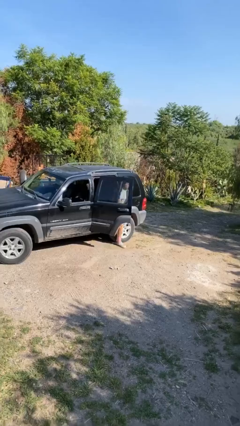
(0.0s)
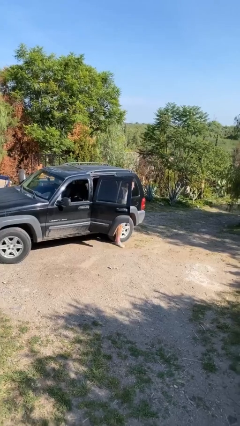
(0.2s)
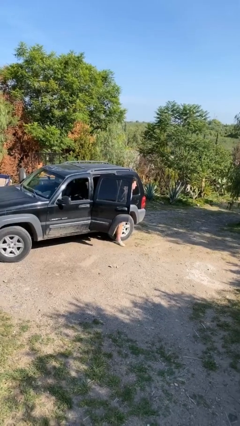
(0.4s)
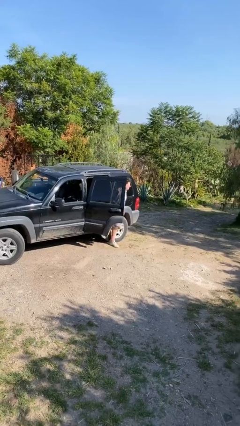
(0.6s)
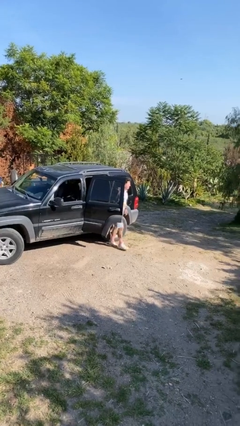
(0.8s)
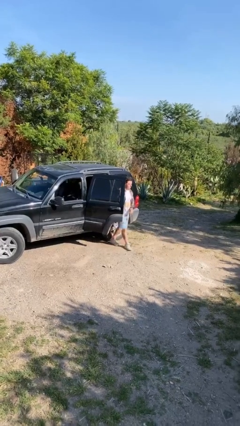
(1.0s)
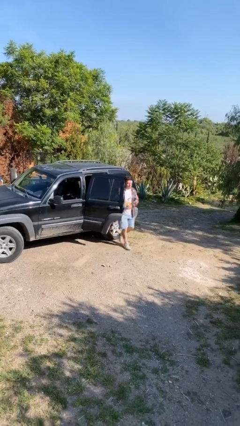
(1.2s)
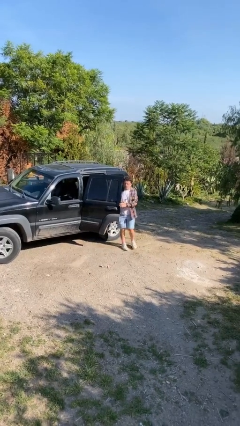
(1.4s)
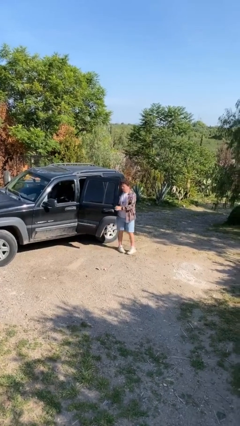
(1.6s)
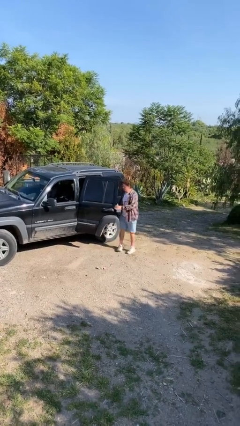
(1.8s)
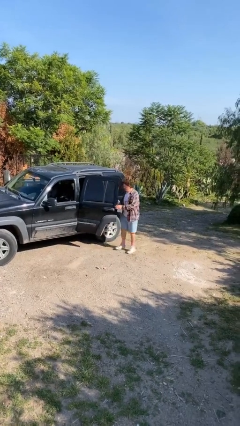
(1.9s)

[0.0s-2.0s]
person exits car

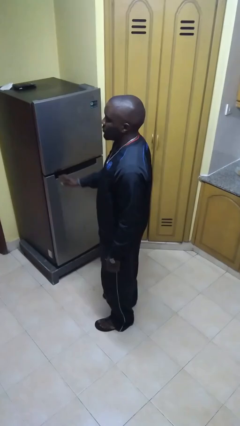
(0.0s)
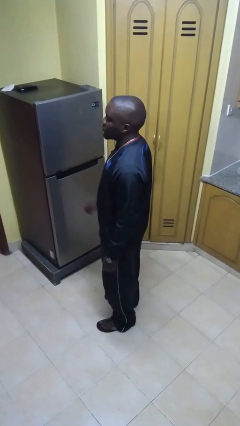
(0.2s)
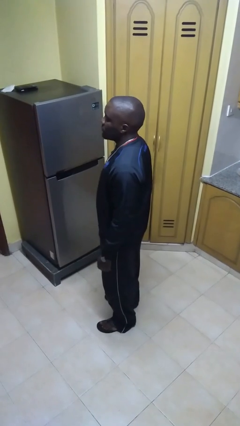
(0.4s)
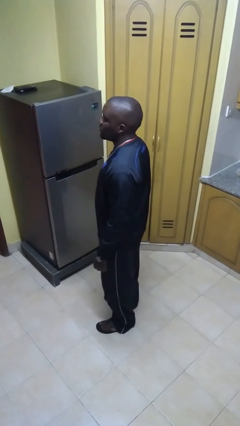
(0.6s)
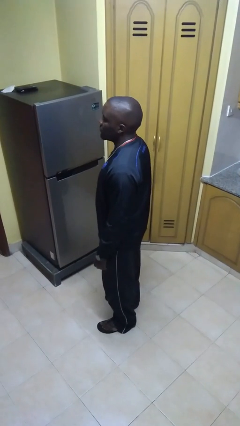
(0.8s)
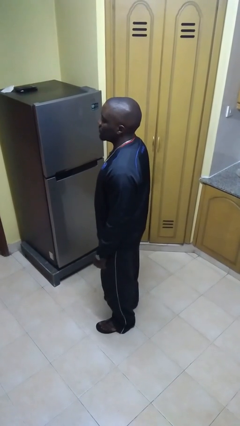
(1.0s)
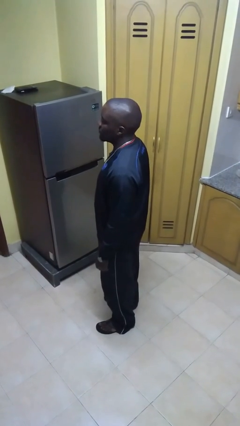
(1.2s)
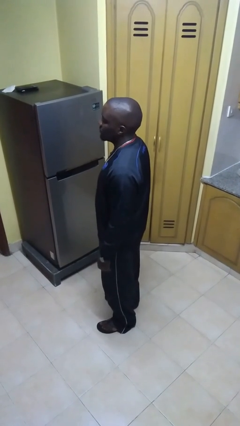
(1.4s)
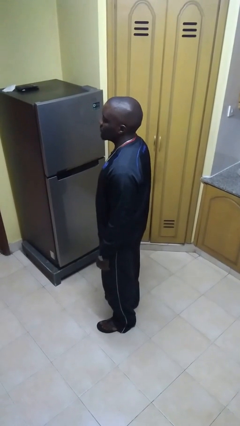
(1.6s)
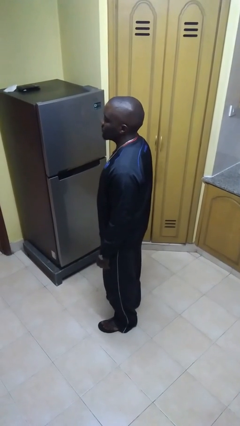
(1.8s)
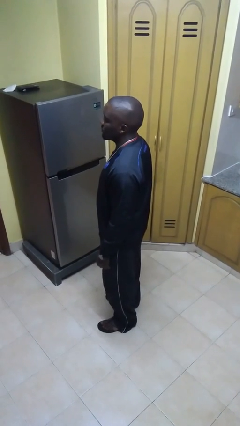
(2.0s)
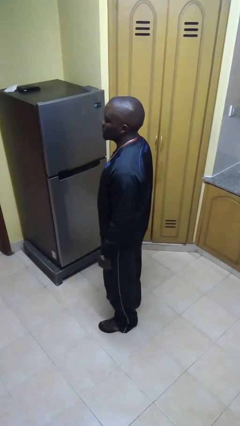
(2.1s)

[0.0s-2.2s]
person dries hands with towel

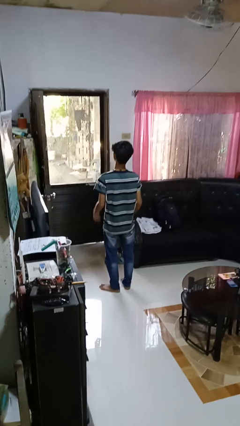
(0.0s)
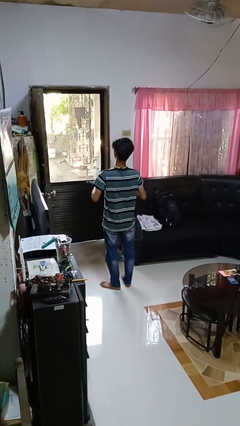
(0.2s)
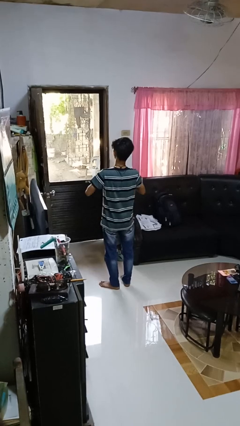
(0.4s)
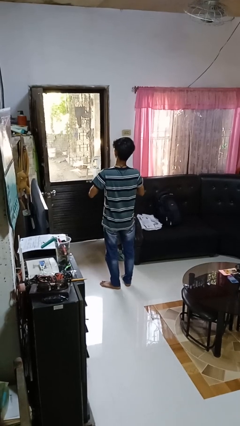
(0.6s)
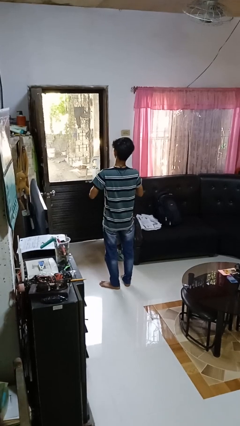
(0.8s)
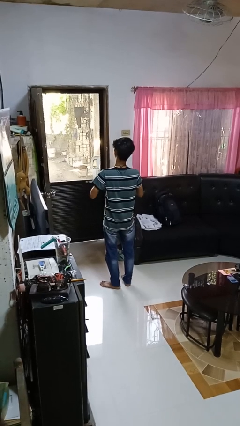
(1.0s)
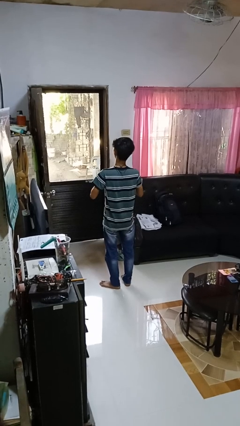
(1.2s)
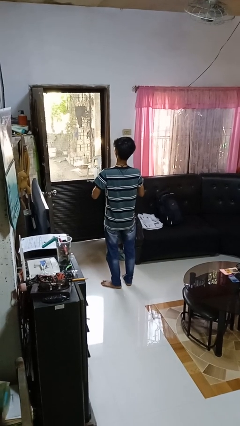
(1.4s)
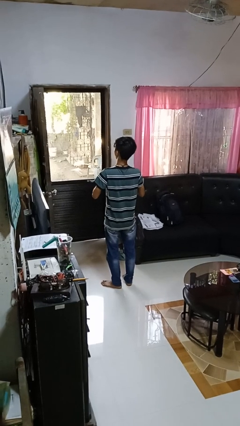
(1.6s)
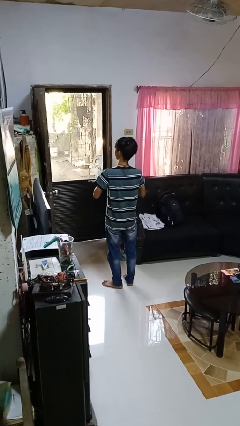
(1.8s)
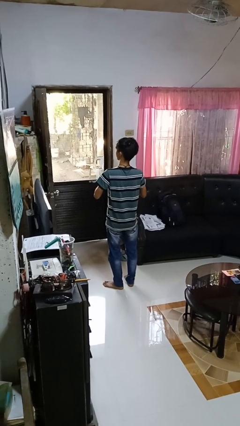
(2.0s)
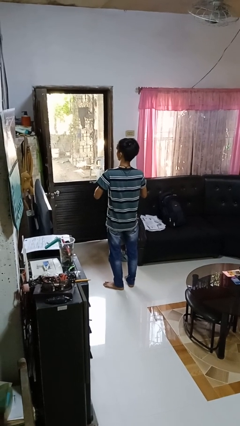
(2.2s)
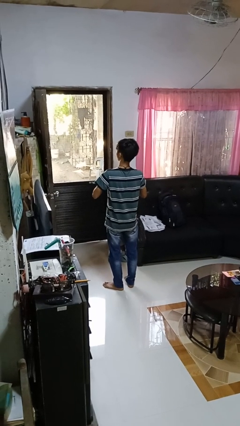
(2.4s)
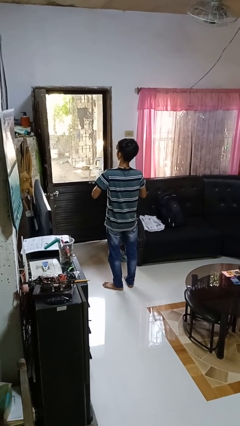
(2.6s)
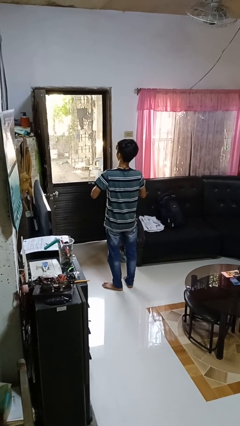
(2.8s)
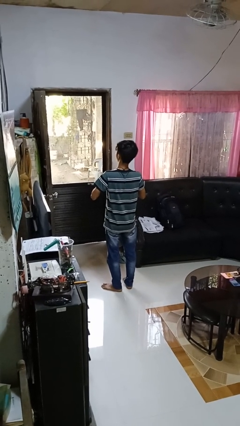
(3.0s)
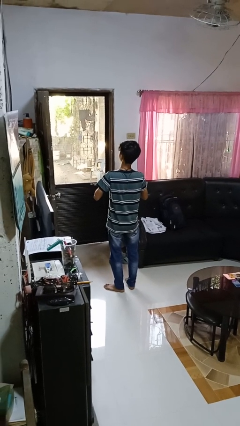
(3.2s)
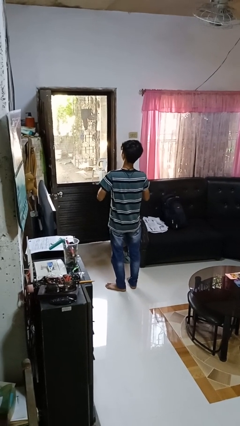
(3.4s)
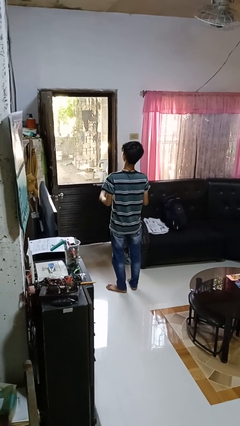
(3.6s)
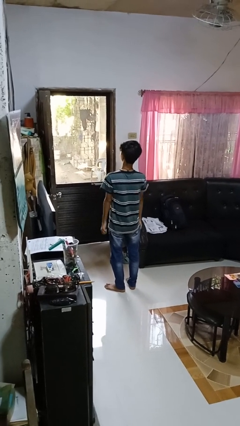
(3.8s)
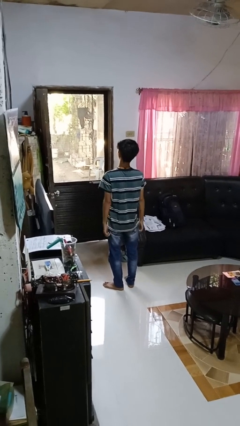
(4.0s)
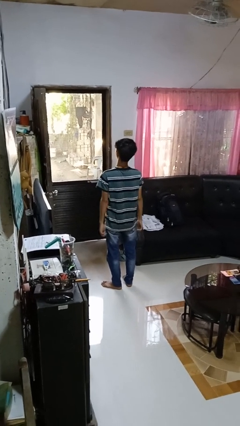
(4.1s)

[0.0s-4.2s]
person buttons shirt

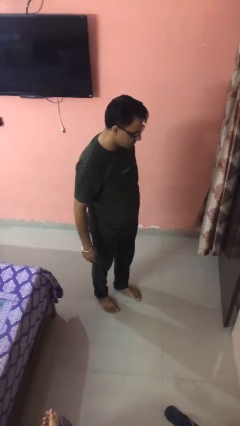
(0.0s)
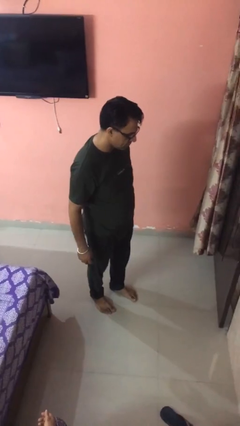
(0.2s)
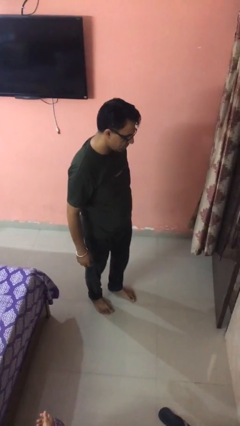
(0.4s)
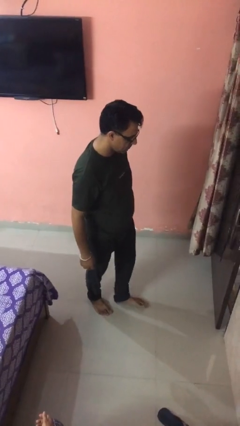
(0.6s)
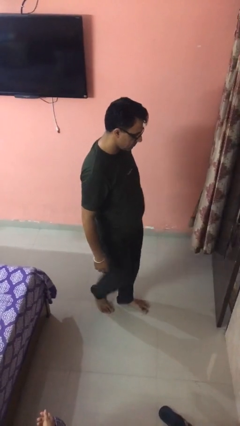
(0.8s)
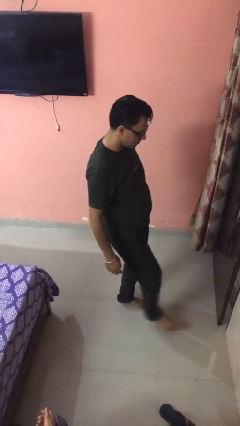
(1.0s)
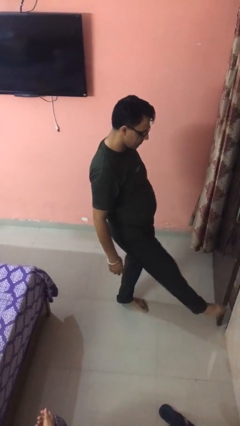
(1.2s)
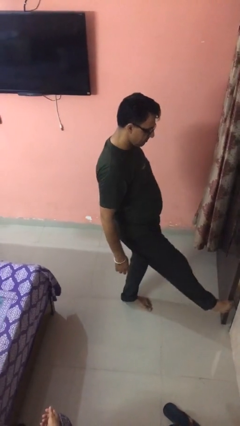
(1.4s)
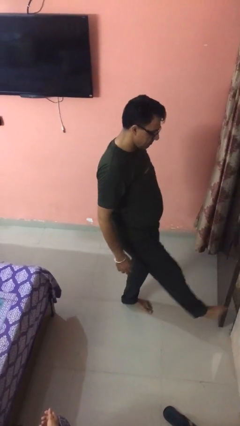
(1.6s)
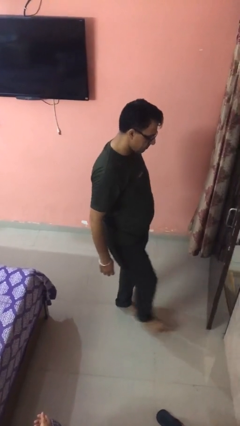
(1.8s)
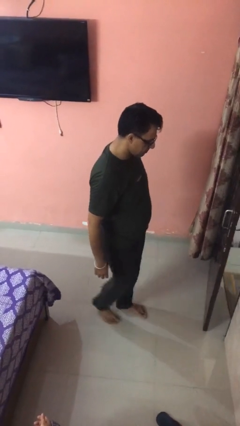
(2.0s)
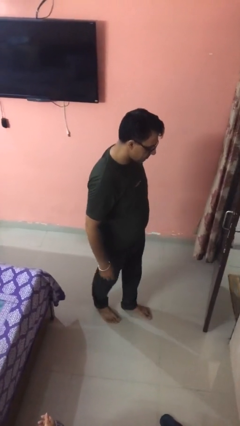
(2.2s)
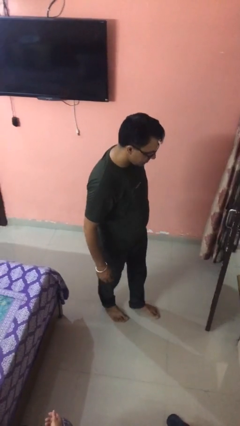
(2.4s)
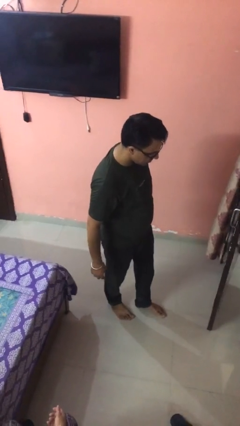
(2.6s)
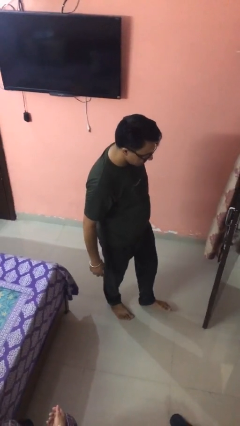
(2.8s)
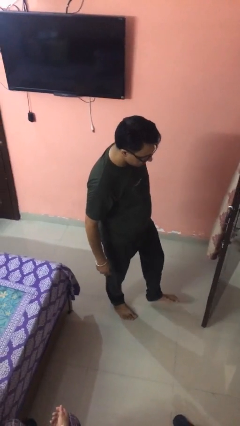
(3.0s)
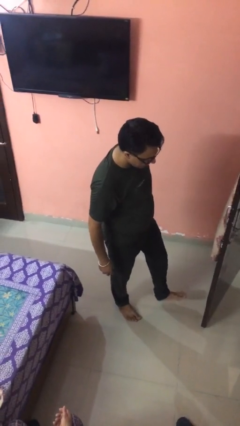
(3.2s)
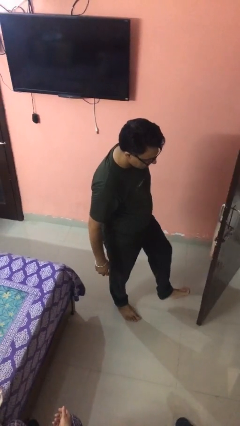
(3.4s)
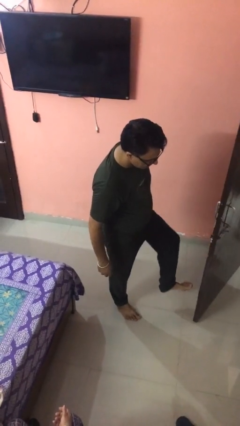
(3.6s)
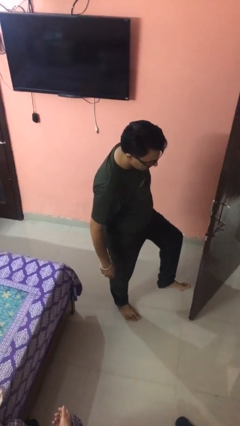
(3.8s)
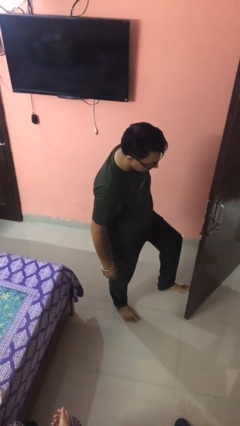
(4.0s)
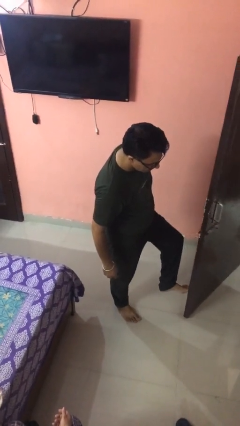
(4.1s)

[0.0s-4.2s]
person opens facility door

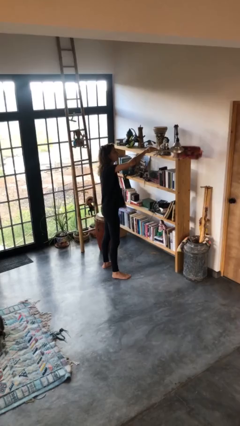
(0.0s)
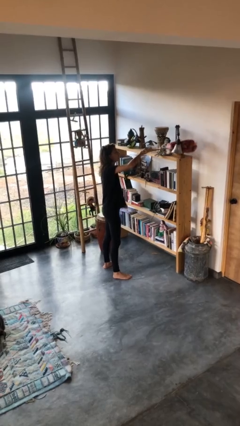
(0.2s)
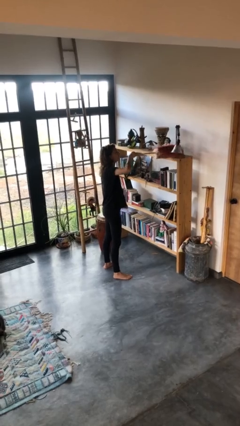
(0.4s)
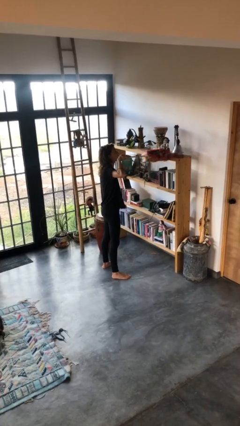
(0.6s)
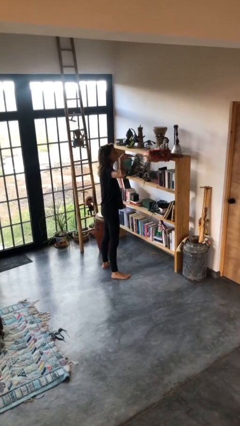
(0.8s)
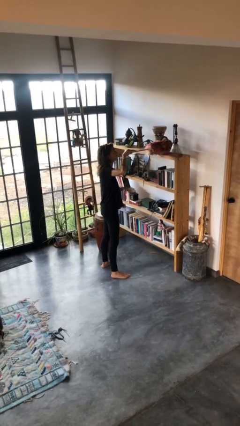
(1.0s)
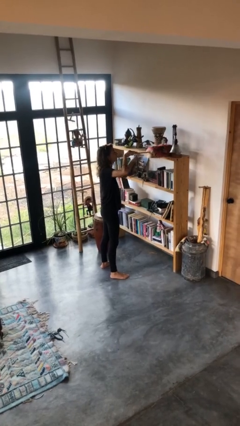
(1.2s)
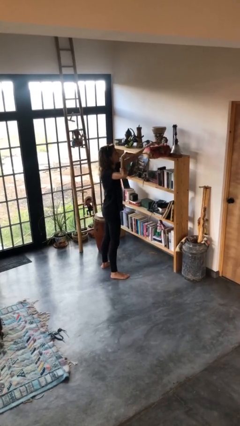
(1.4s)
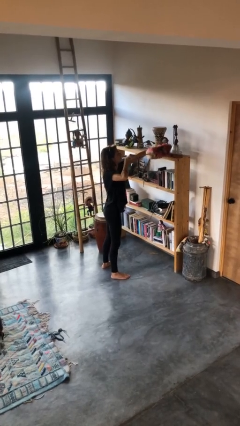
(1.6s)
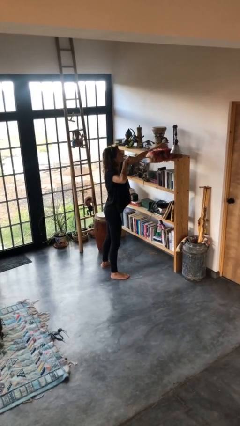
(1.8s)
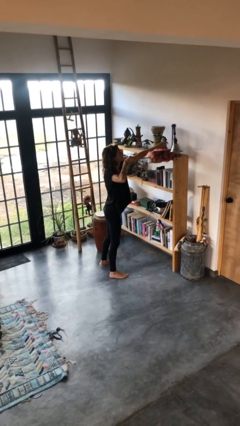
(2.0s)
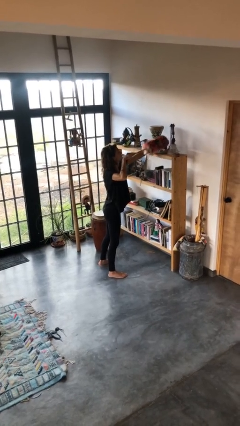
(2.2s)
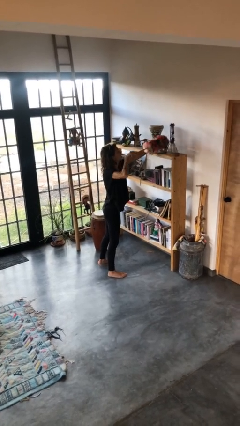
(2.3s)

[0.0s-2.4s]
person dusts furniture

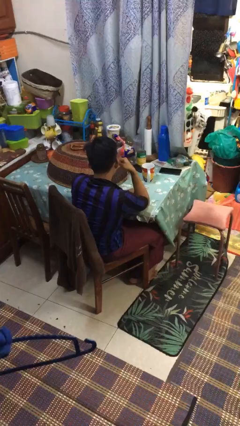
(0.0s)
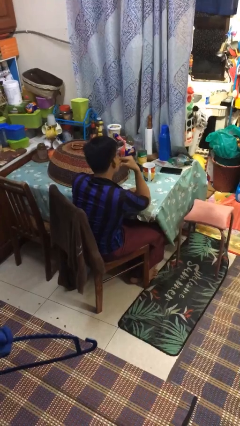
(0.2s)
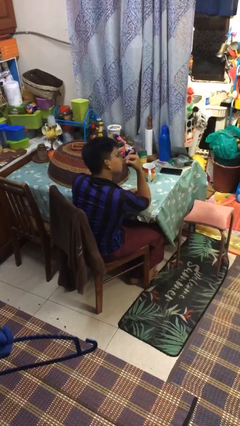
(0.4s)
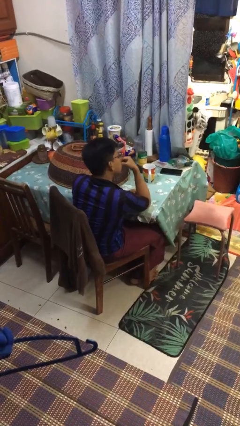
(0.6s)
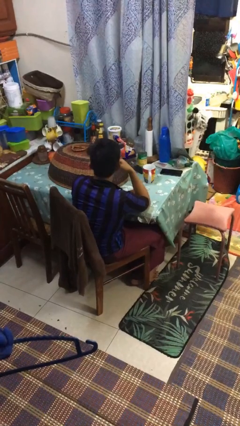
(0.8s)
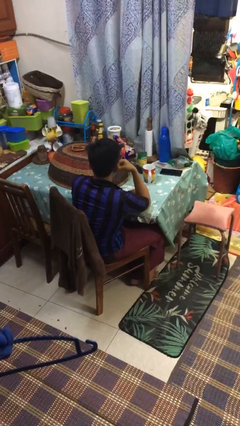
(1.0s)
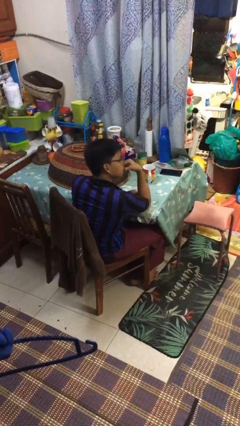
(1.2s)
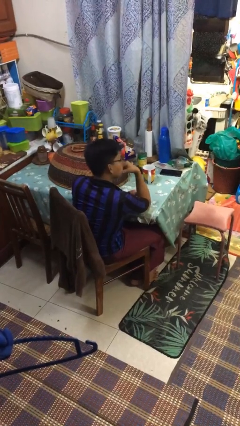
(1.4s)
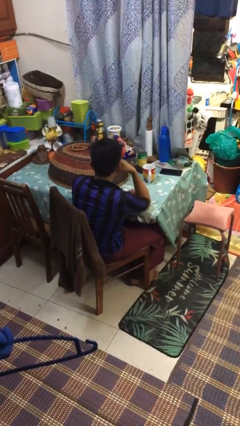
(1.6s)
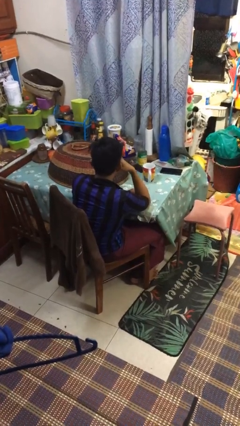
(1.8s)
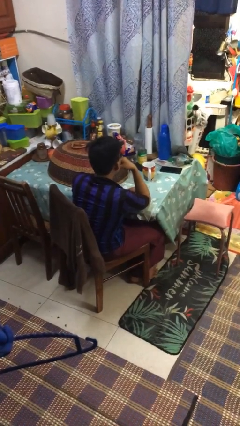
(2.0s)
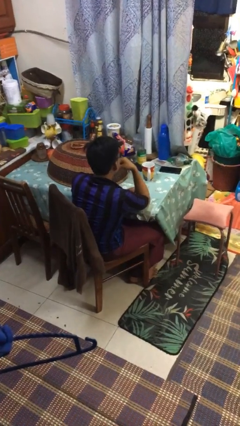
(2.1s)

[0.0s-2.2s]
person shakes head
